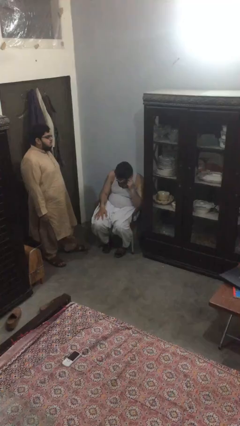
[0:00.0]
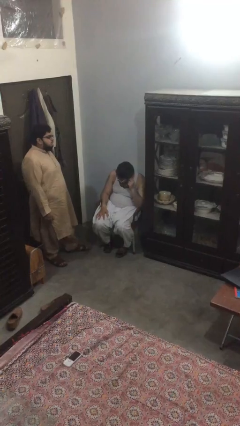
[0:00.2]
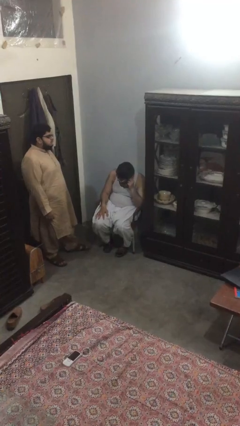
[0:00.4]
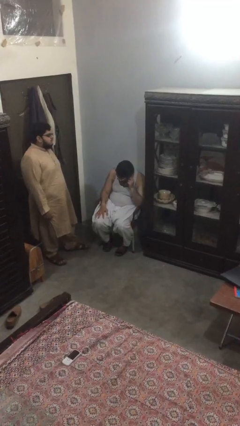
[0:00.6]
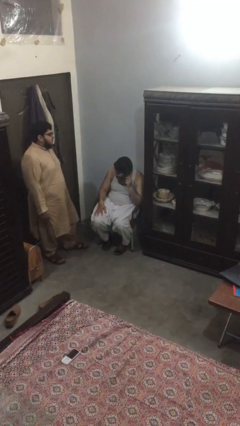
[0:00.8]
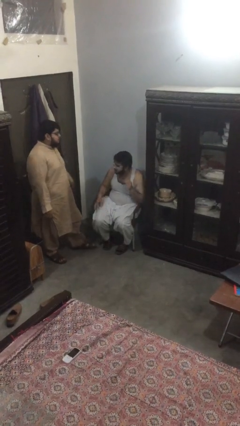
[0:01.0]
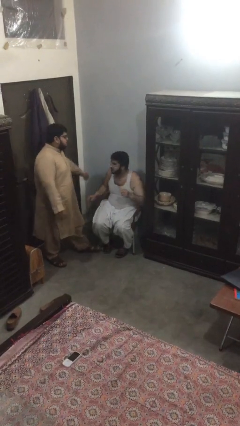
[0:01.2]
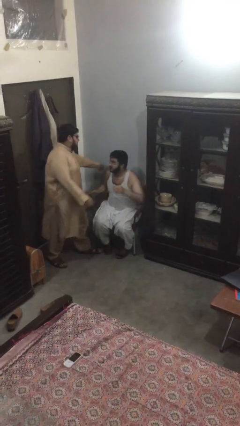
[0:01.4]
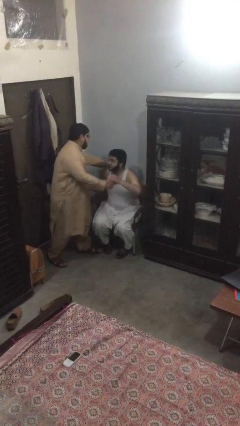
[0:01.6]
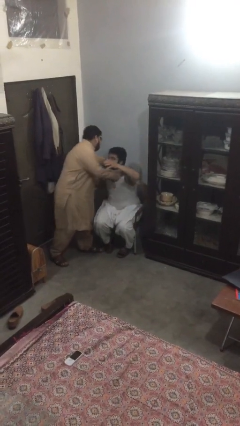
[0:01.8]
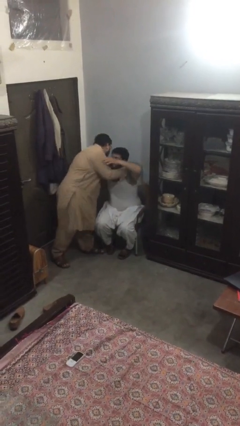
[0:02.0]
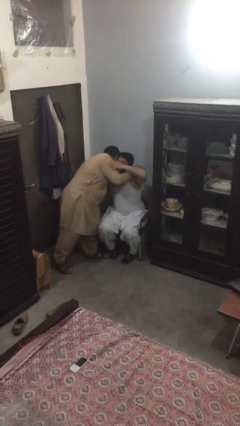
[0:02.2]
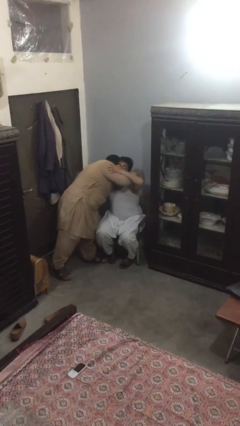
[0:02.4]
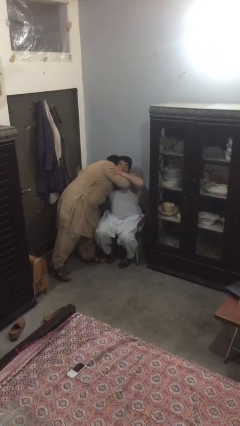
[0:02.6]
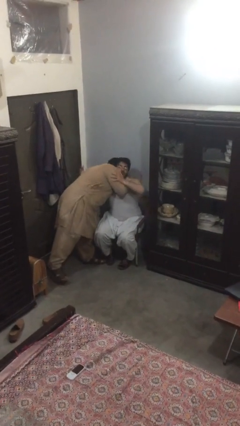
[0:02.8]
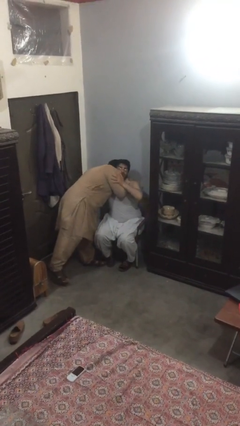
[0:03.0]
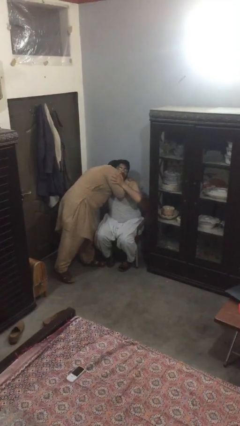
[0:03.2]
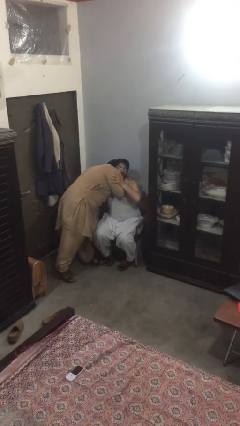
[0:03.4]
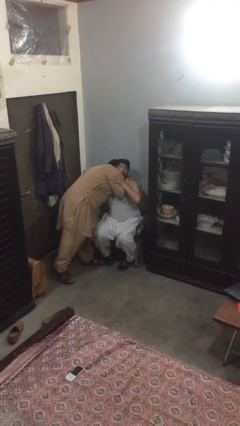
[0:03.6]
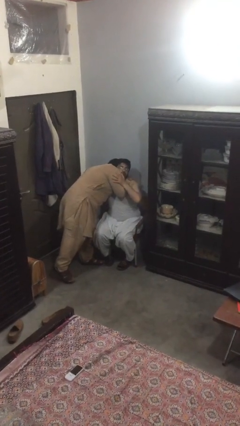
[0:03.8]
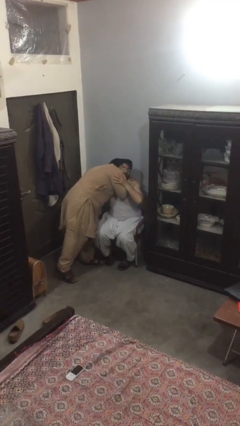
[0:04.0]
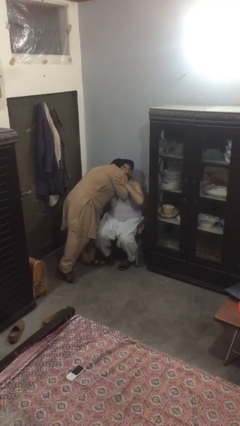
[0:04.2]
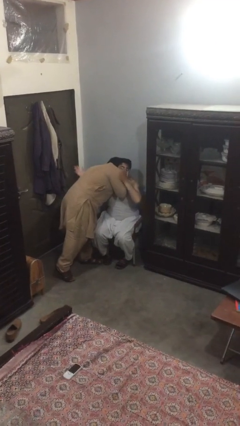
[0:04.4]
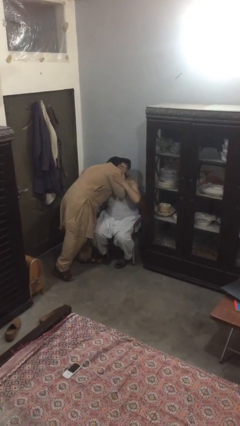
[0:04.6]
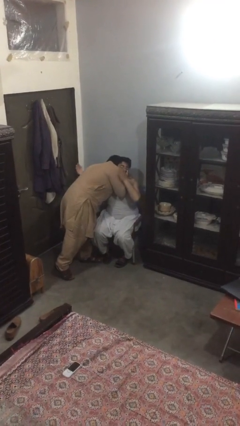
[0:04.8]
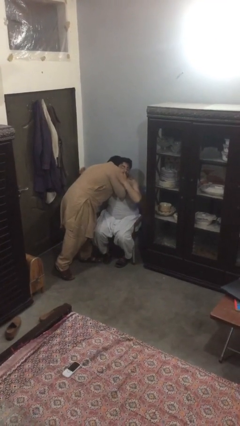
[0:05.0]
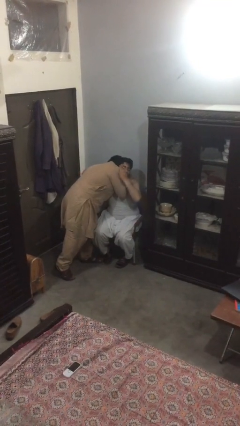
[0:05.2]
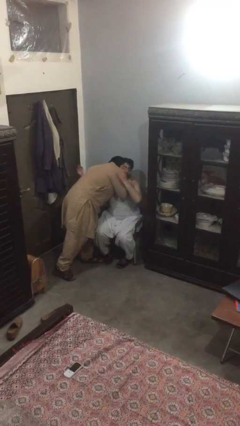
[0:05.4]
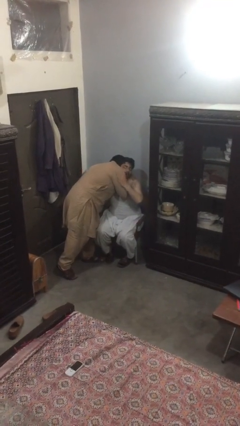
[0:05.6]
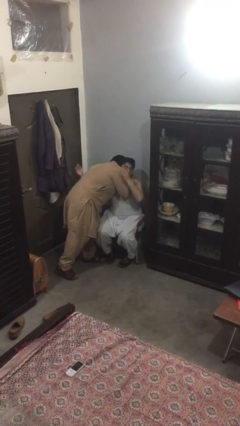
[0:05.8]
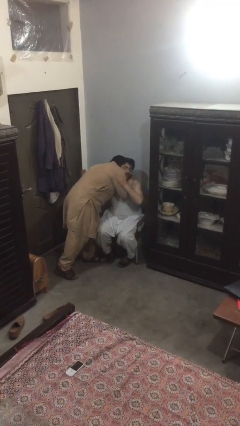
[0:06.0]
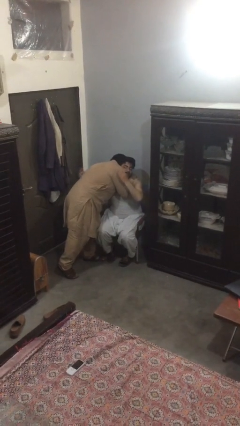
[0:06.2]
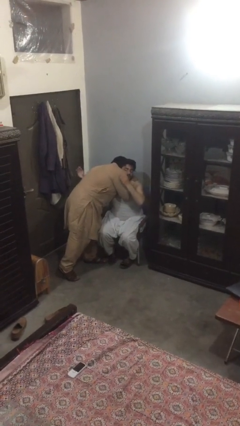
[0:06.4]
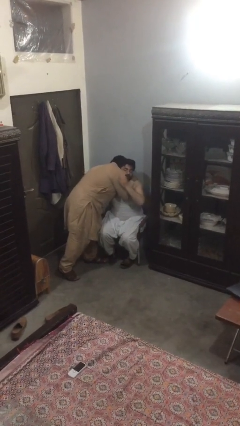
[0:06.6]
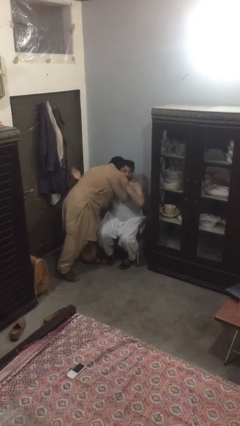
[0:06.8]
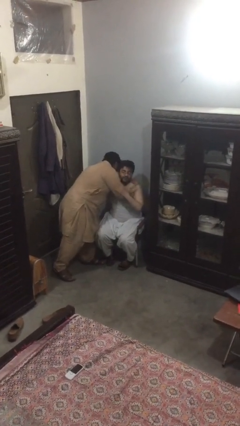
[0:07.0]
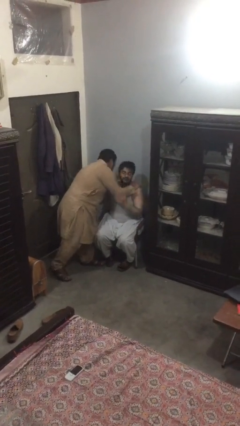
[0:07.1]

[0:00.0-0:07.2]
person embraces person

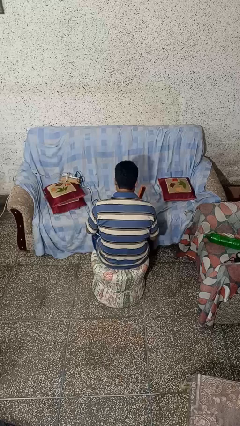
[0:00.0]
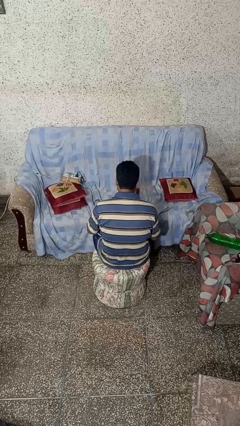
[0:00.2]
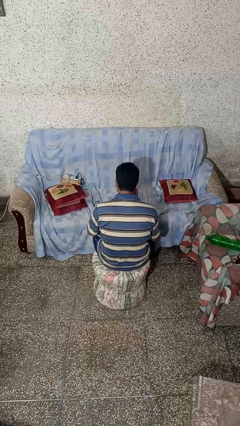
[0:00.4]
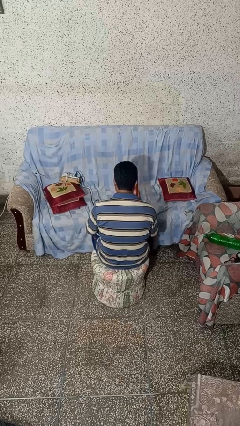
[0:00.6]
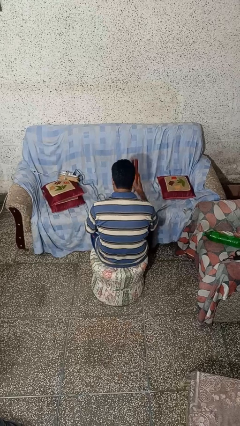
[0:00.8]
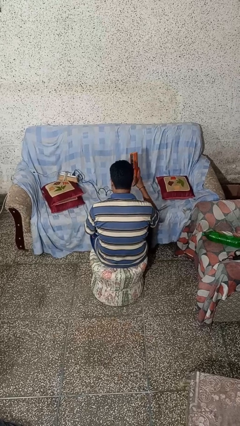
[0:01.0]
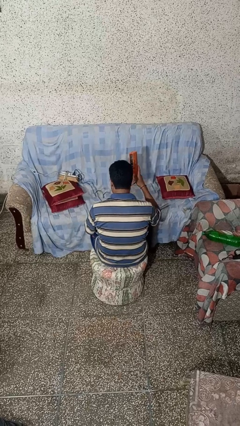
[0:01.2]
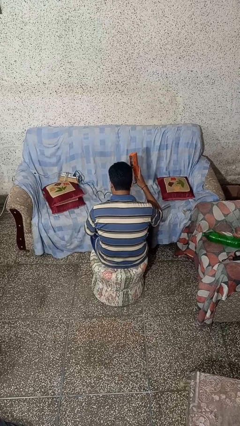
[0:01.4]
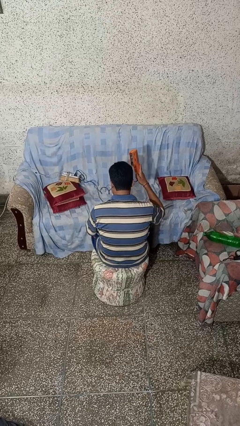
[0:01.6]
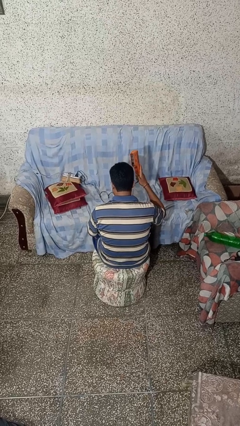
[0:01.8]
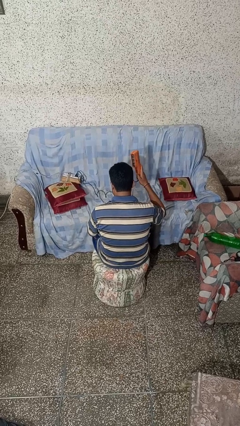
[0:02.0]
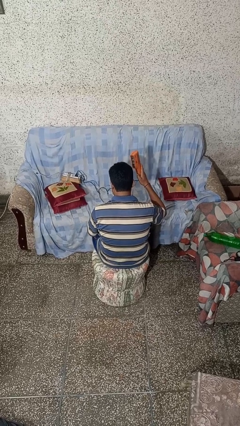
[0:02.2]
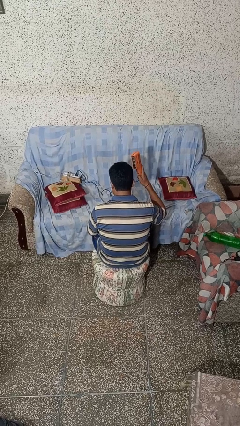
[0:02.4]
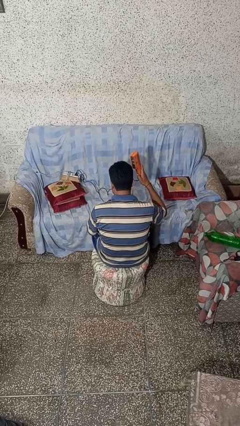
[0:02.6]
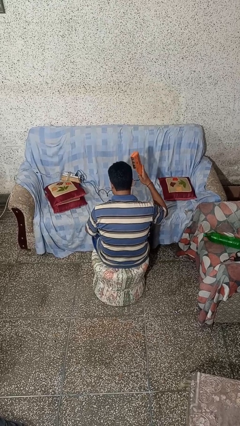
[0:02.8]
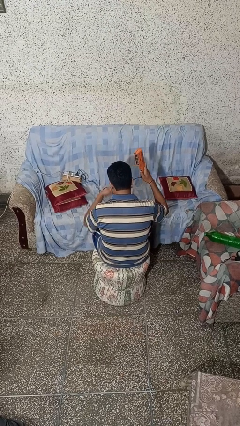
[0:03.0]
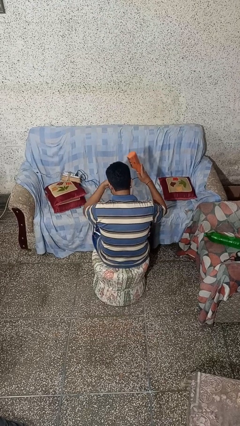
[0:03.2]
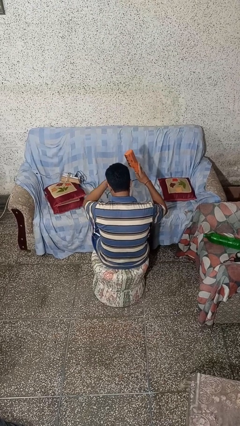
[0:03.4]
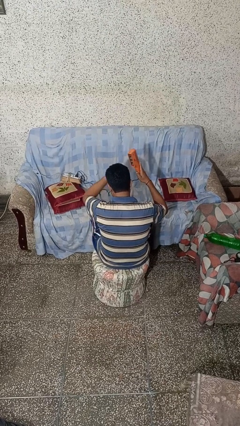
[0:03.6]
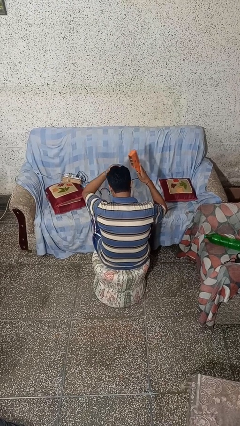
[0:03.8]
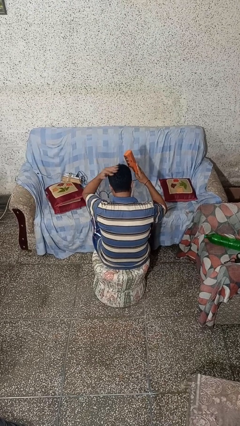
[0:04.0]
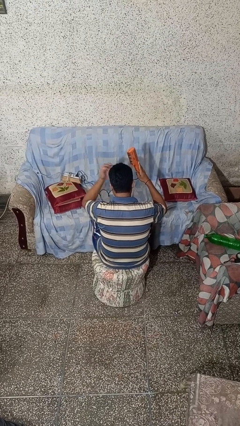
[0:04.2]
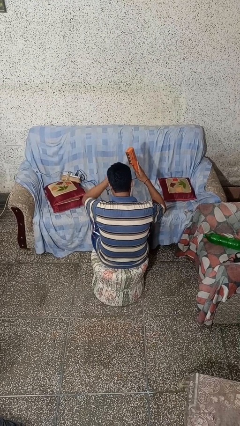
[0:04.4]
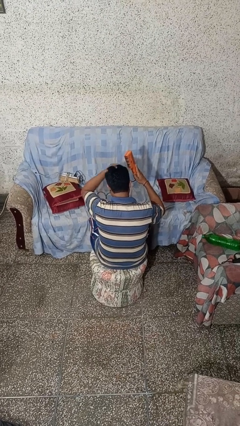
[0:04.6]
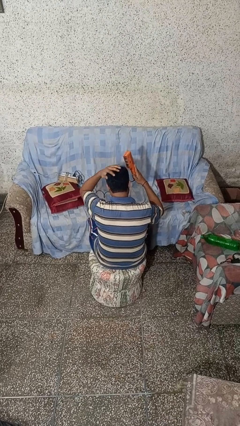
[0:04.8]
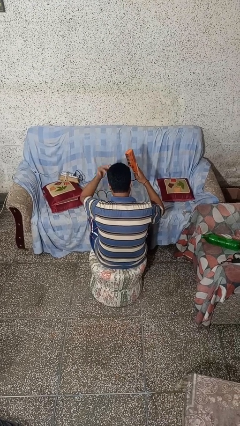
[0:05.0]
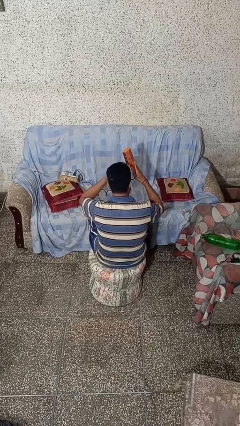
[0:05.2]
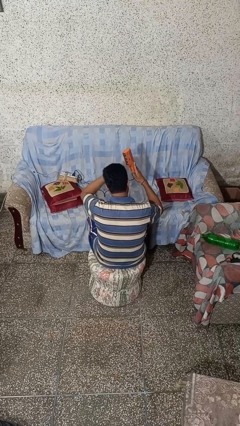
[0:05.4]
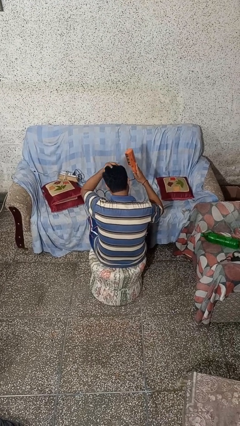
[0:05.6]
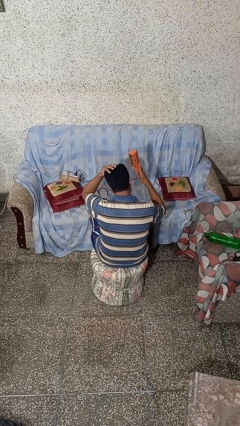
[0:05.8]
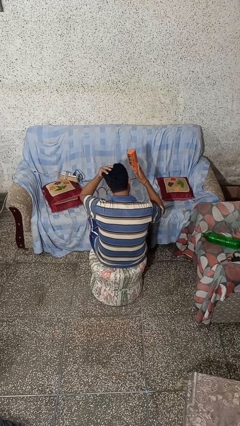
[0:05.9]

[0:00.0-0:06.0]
person dries hair with hairdryer

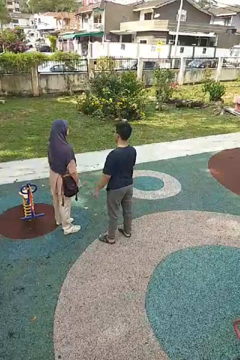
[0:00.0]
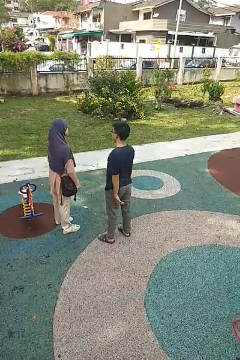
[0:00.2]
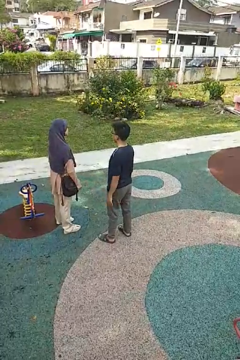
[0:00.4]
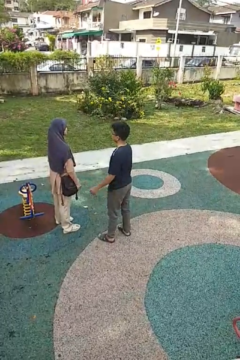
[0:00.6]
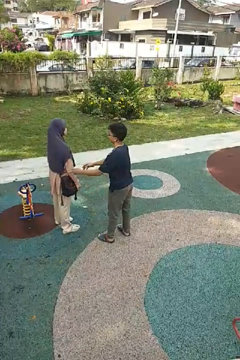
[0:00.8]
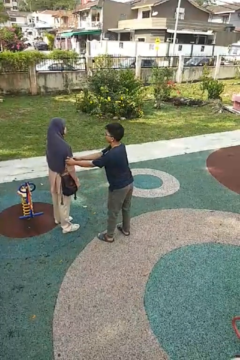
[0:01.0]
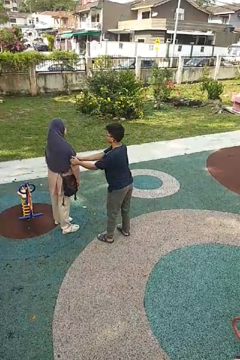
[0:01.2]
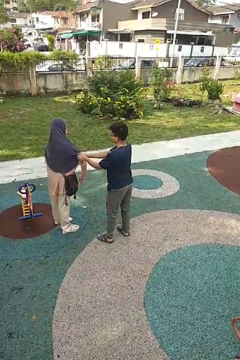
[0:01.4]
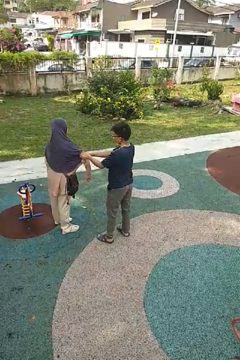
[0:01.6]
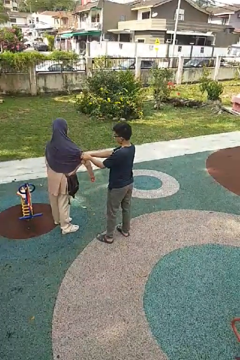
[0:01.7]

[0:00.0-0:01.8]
person grabs person by bicep

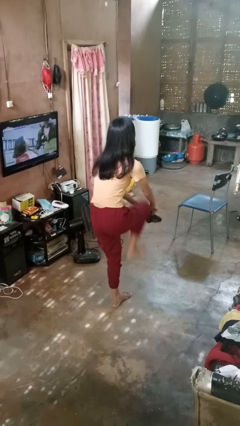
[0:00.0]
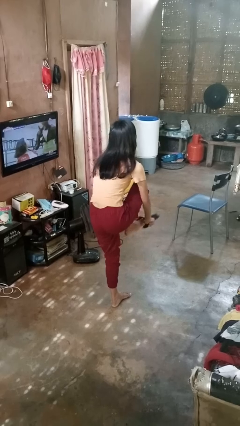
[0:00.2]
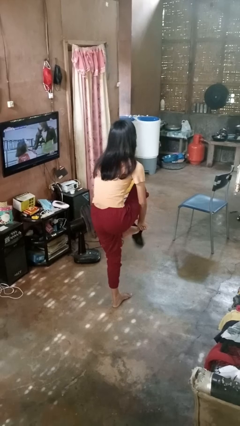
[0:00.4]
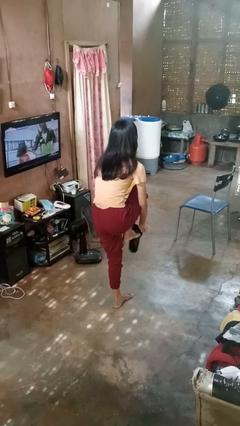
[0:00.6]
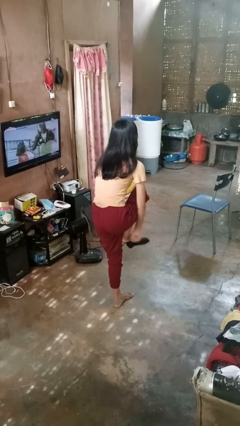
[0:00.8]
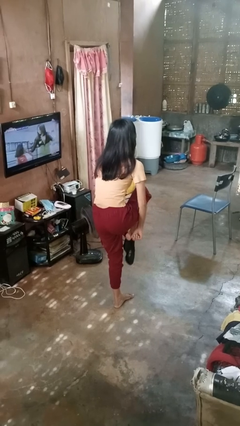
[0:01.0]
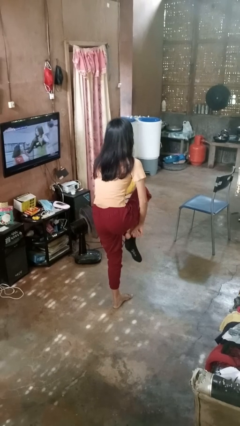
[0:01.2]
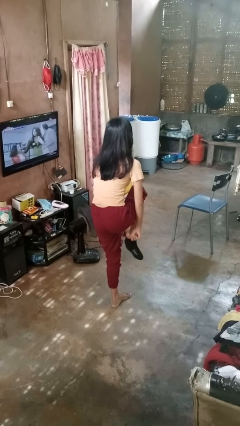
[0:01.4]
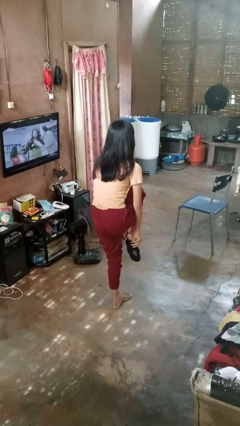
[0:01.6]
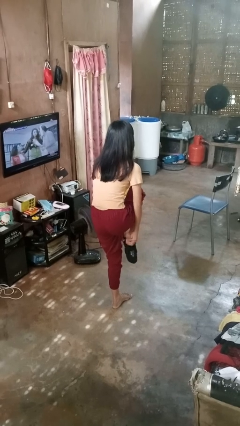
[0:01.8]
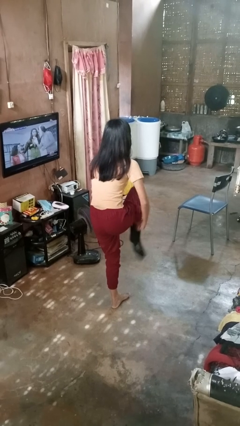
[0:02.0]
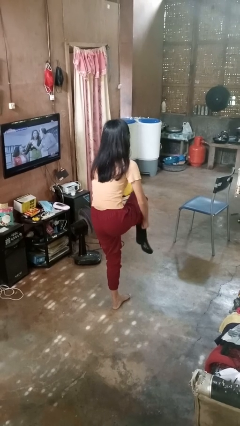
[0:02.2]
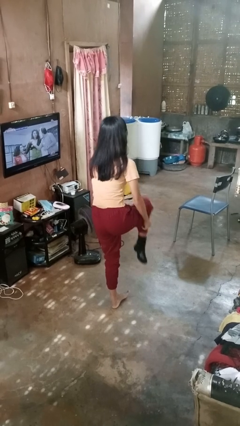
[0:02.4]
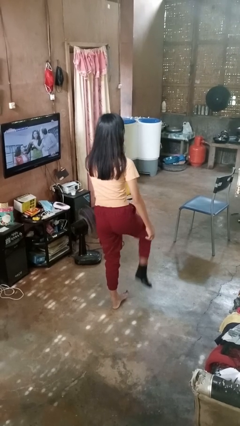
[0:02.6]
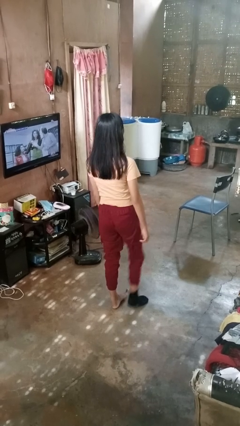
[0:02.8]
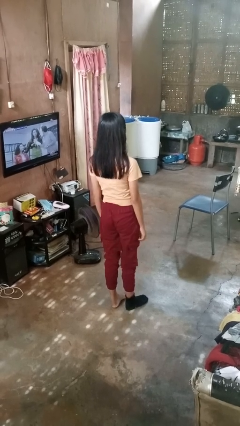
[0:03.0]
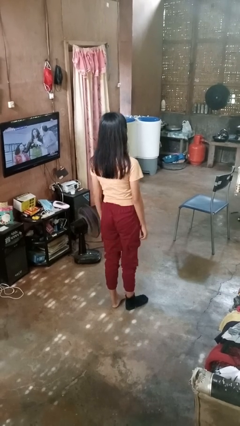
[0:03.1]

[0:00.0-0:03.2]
person puts on socks
